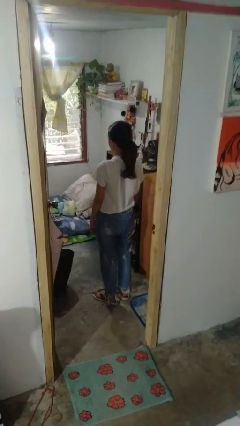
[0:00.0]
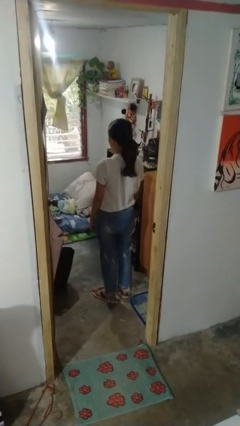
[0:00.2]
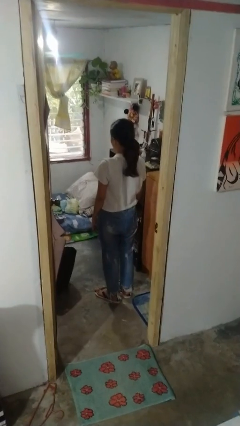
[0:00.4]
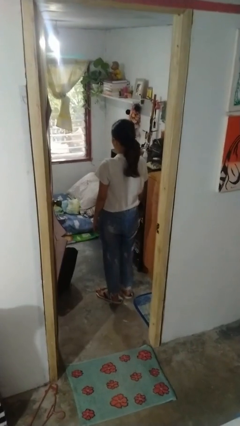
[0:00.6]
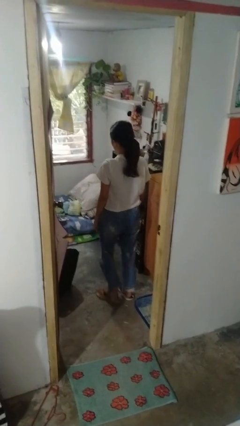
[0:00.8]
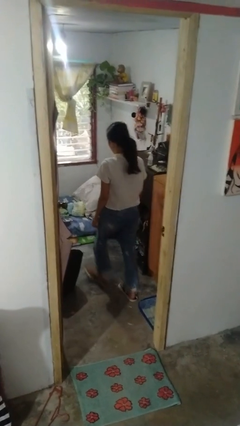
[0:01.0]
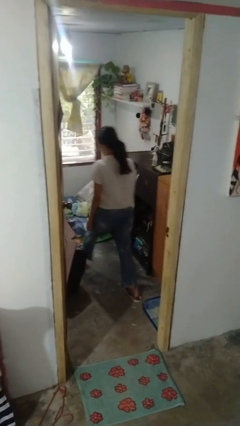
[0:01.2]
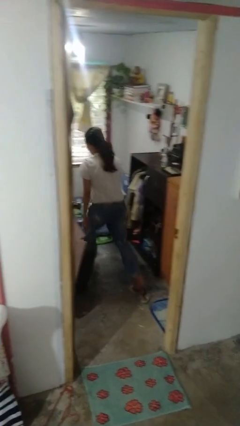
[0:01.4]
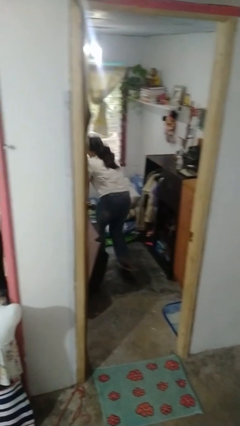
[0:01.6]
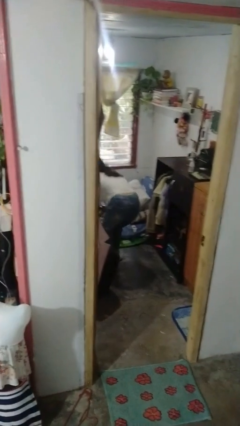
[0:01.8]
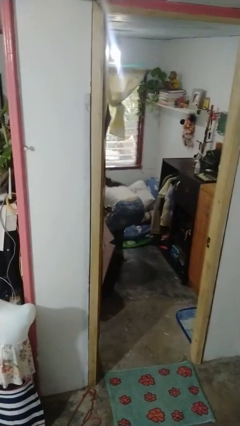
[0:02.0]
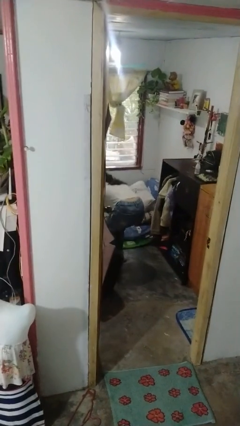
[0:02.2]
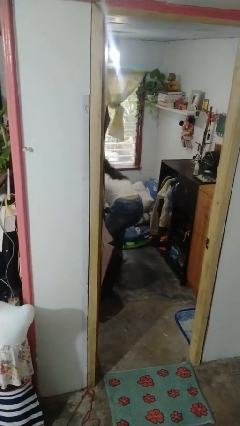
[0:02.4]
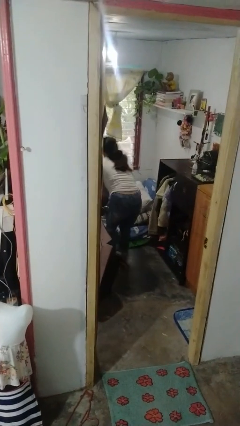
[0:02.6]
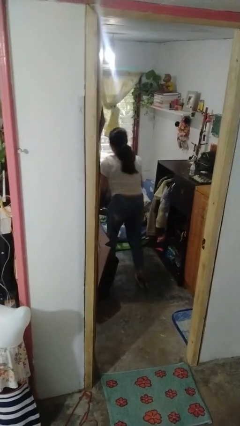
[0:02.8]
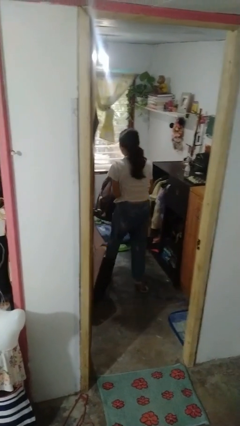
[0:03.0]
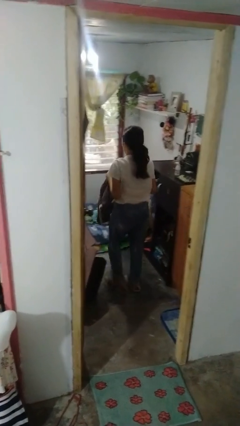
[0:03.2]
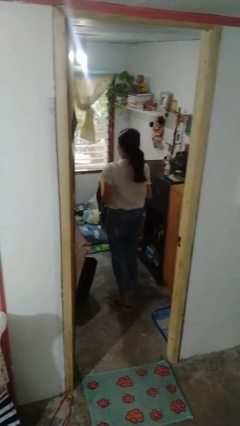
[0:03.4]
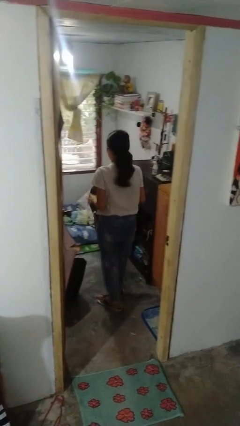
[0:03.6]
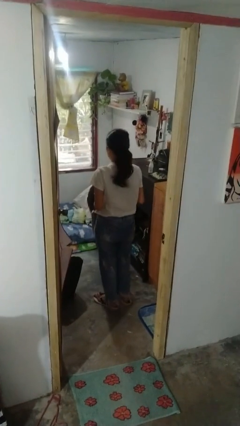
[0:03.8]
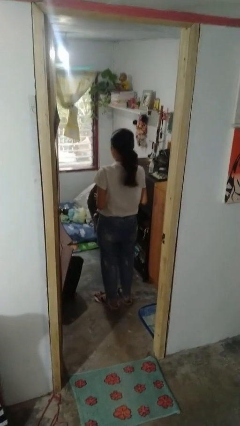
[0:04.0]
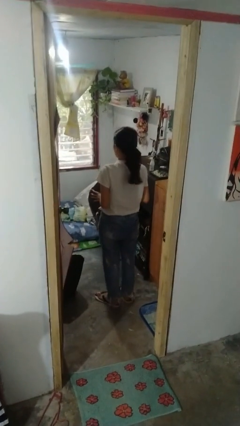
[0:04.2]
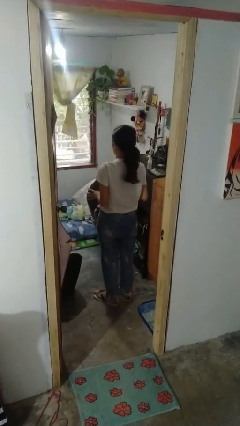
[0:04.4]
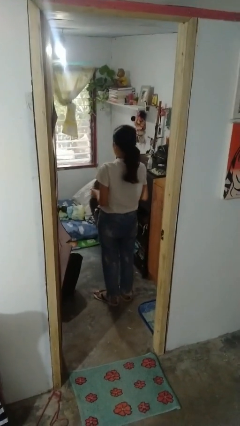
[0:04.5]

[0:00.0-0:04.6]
person picks up object from bed

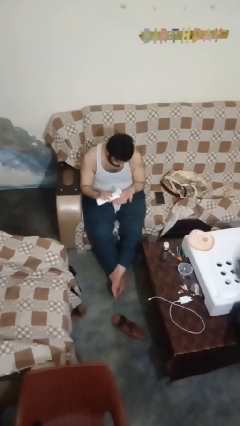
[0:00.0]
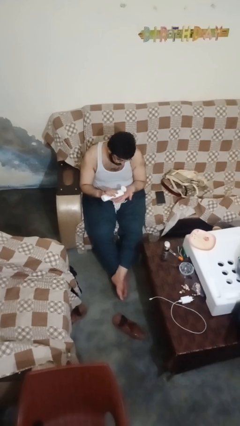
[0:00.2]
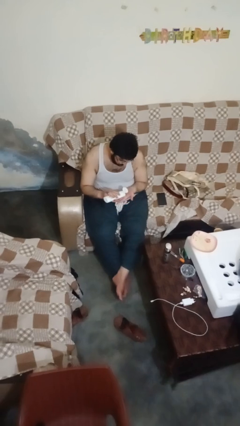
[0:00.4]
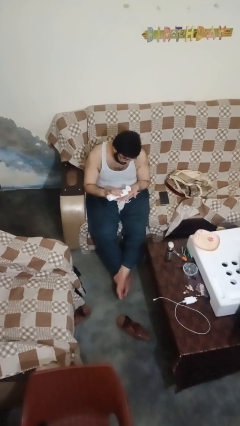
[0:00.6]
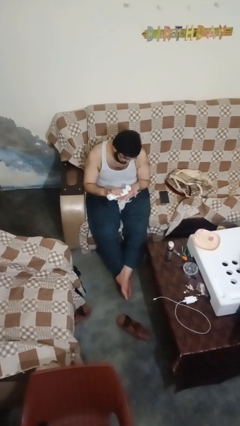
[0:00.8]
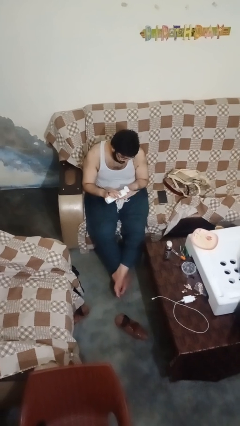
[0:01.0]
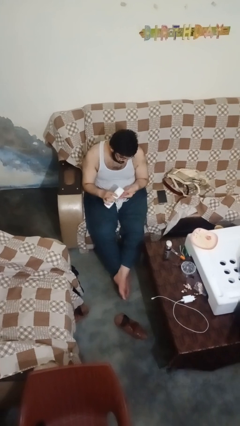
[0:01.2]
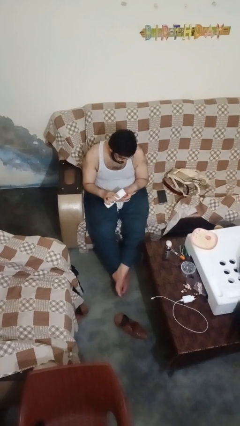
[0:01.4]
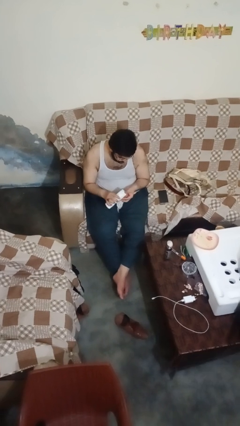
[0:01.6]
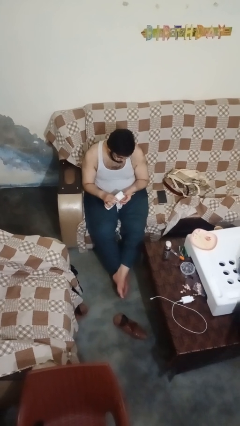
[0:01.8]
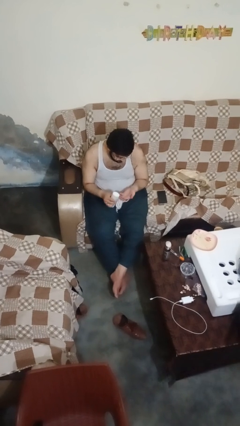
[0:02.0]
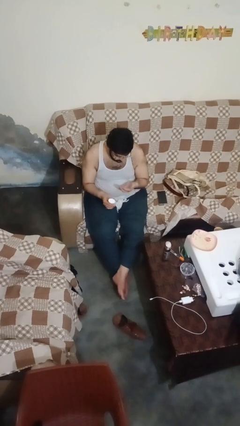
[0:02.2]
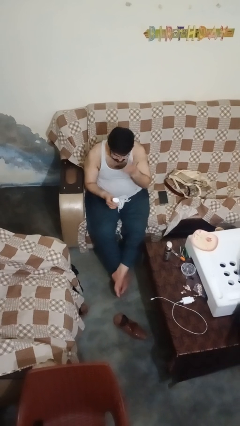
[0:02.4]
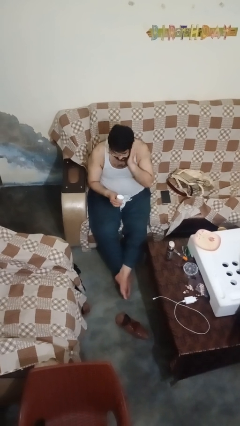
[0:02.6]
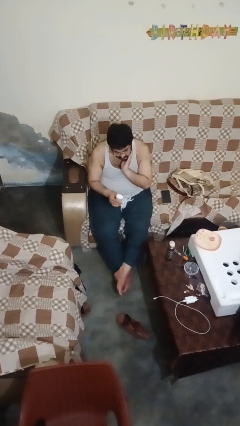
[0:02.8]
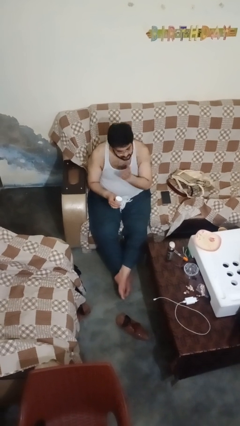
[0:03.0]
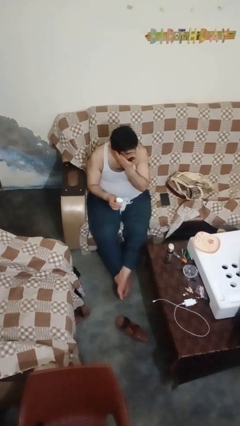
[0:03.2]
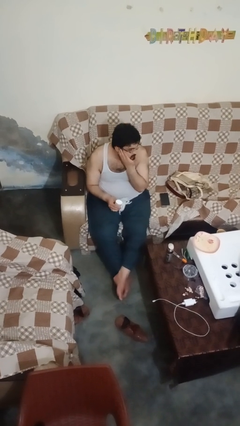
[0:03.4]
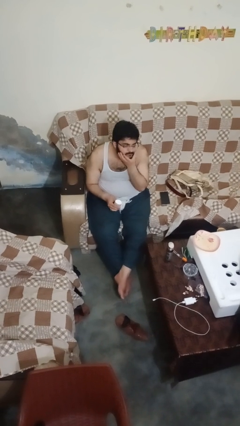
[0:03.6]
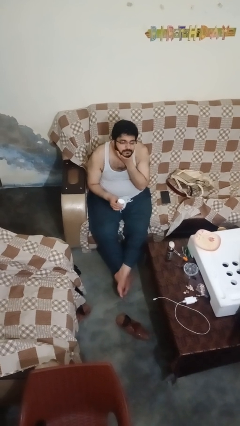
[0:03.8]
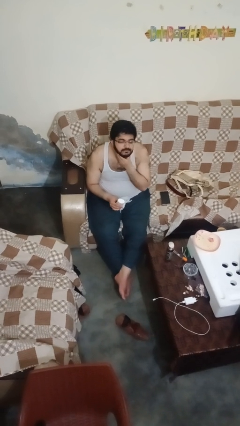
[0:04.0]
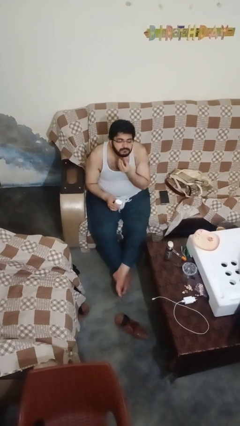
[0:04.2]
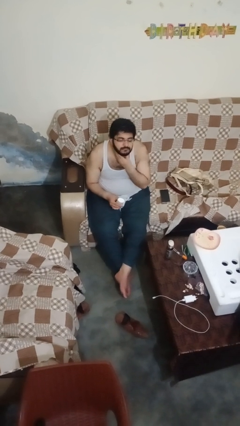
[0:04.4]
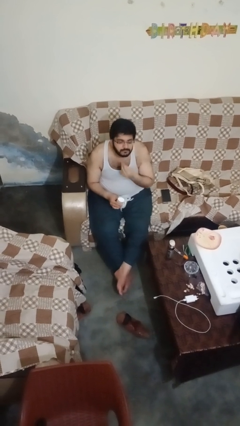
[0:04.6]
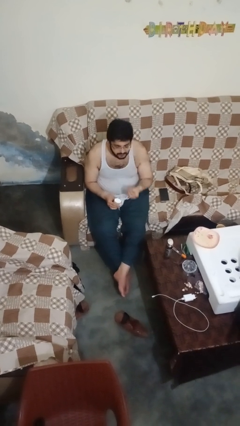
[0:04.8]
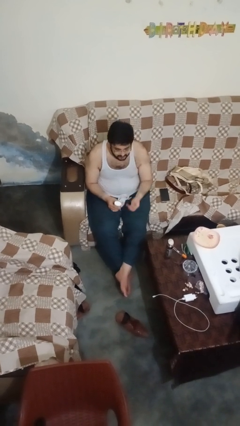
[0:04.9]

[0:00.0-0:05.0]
person applies sunscreen

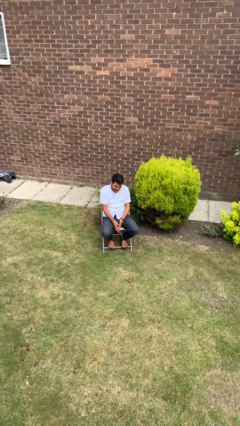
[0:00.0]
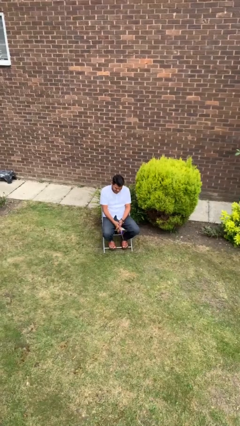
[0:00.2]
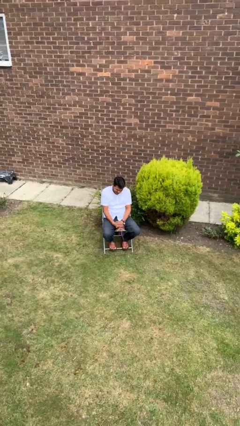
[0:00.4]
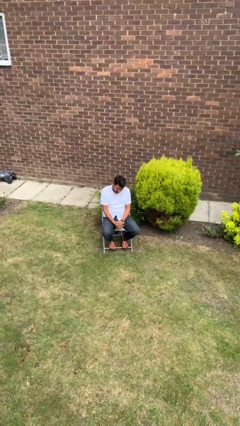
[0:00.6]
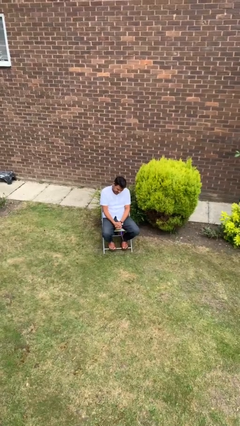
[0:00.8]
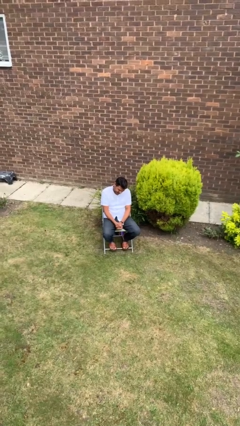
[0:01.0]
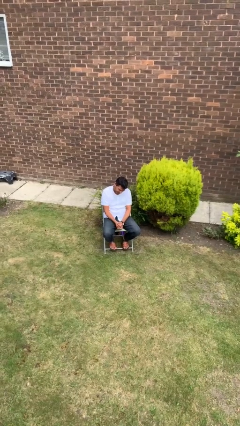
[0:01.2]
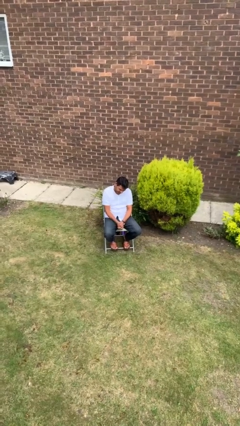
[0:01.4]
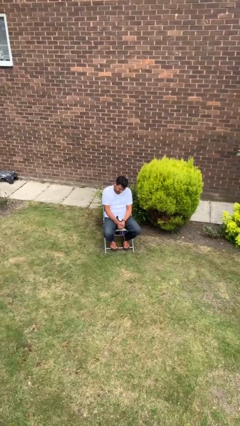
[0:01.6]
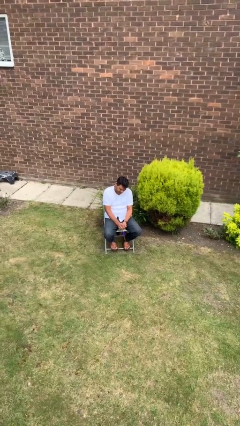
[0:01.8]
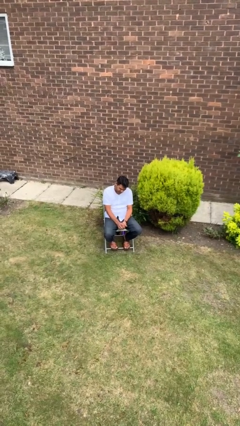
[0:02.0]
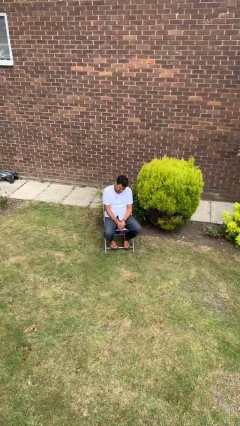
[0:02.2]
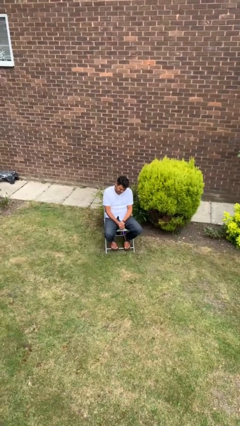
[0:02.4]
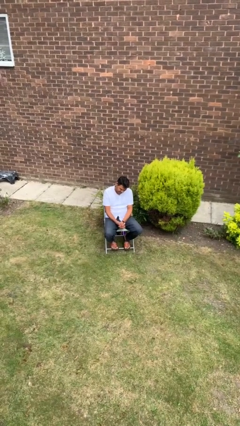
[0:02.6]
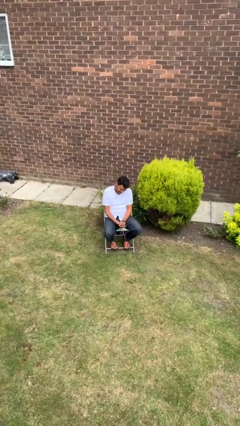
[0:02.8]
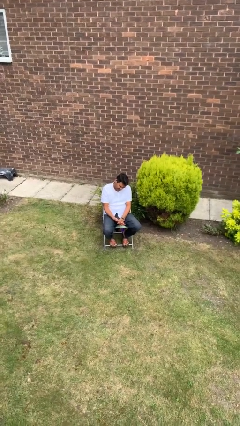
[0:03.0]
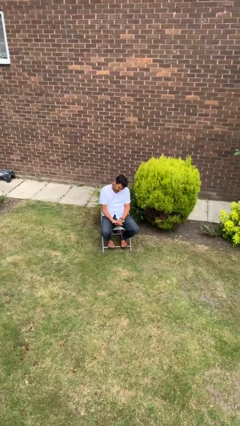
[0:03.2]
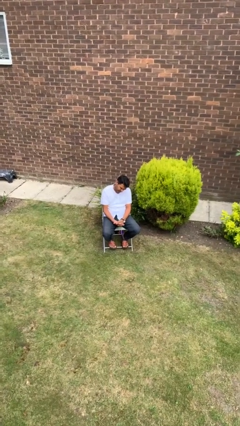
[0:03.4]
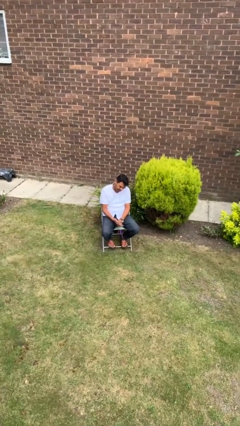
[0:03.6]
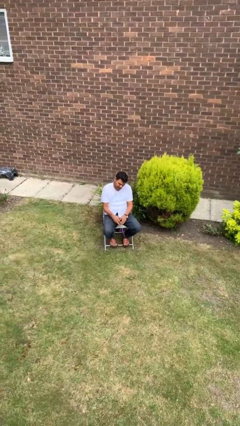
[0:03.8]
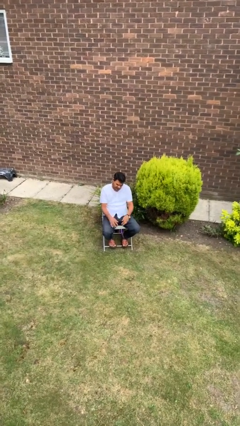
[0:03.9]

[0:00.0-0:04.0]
person looks at hands in lap

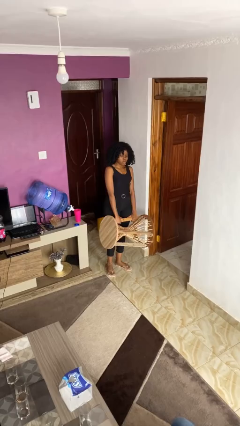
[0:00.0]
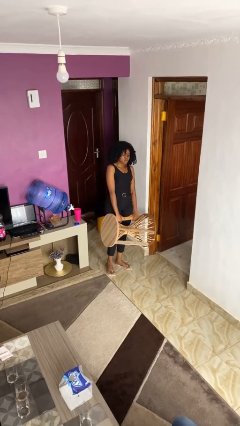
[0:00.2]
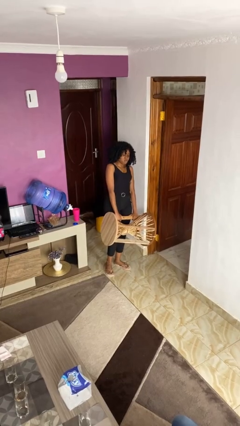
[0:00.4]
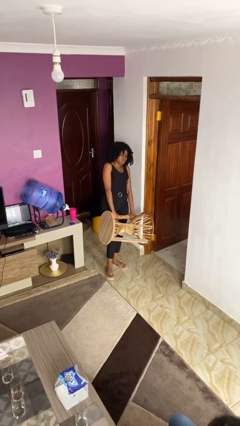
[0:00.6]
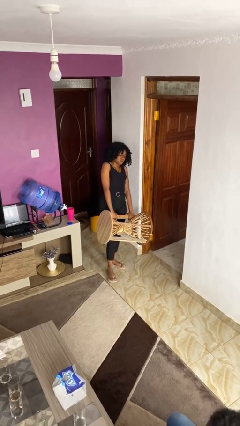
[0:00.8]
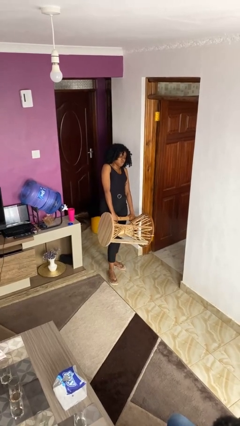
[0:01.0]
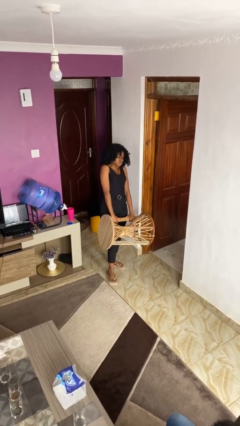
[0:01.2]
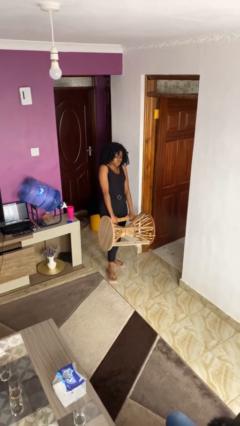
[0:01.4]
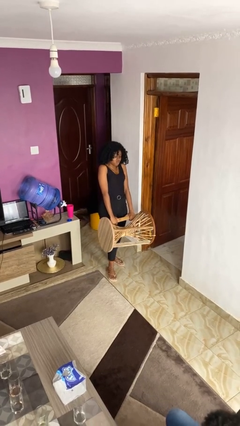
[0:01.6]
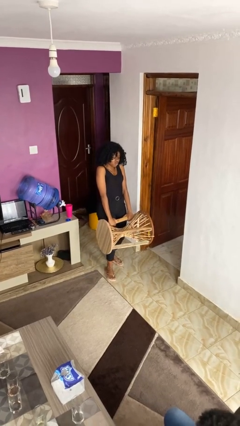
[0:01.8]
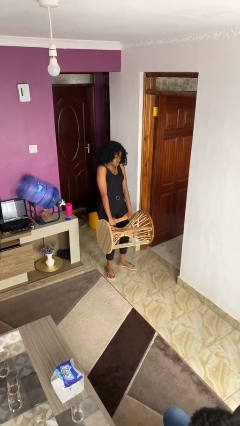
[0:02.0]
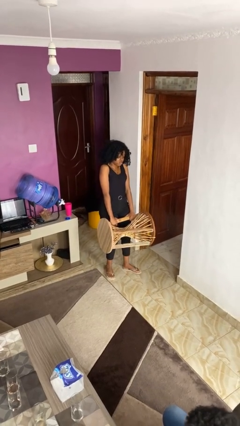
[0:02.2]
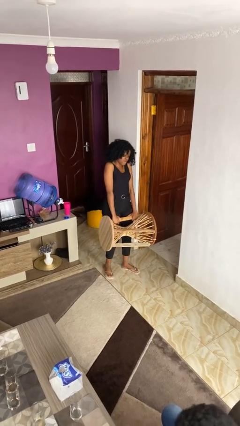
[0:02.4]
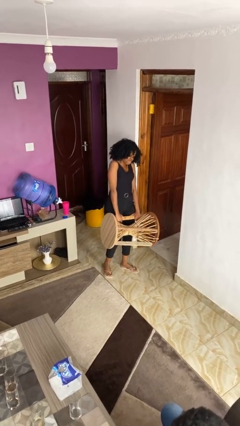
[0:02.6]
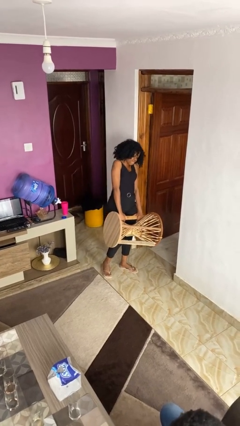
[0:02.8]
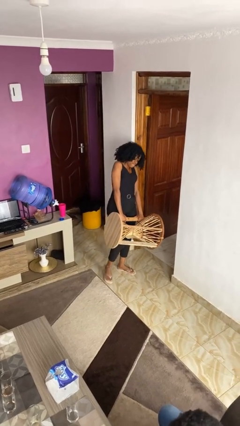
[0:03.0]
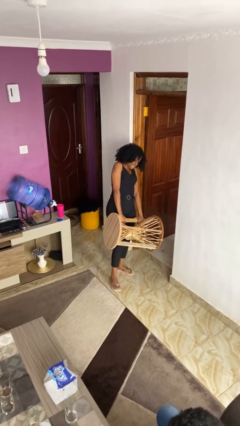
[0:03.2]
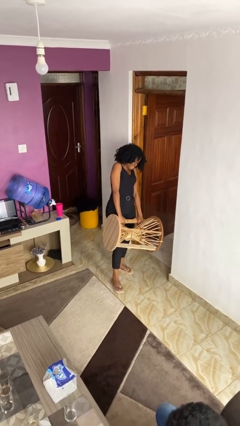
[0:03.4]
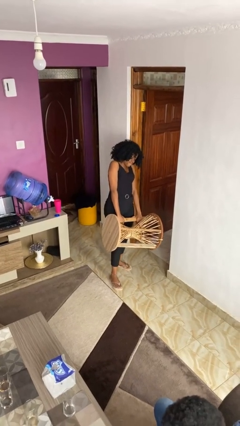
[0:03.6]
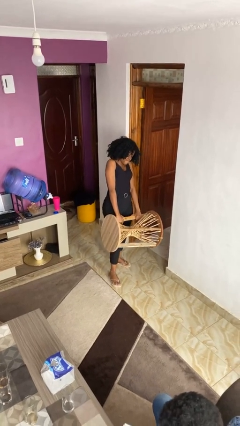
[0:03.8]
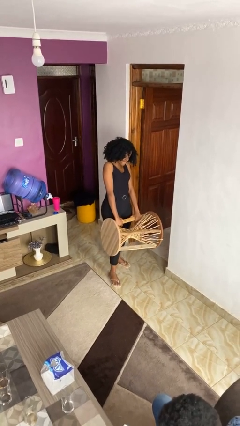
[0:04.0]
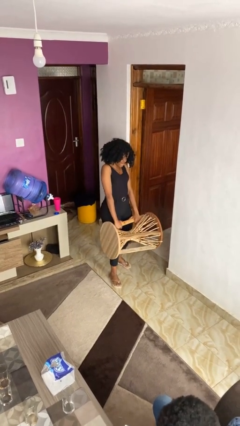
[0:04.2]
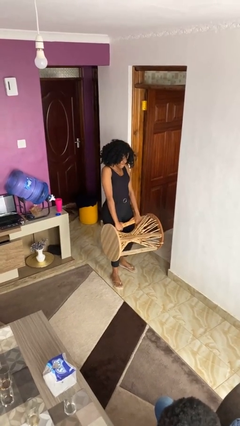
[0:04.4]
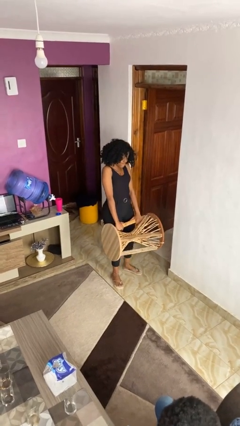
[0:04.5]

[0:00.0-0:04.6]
person carries furniture
